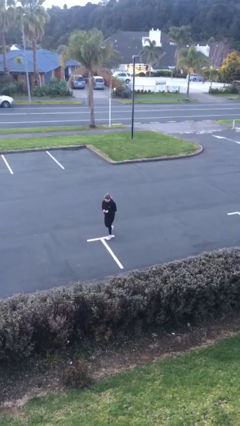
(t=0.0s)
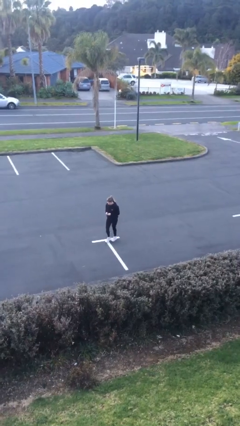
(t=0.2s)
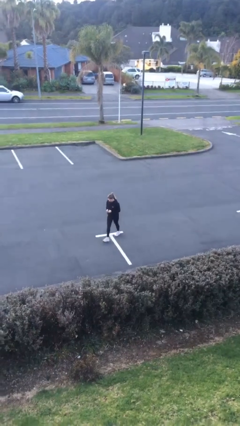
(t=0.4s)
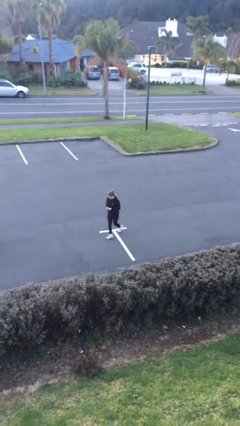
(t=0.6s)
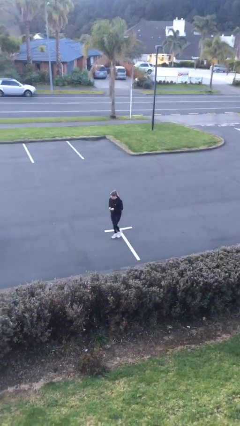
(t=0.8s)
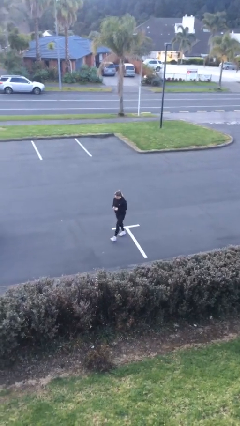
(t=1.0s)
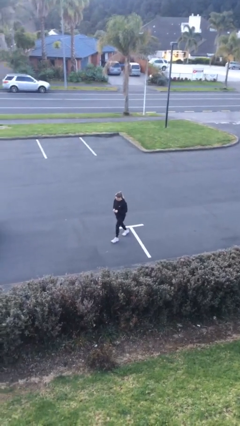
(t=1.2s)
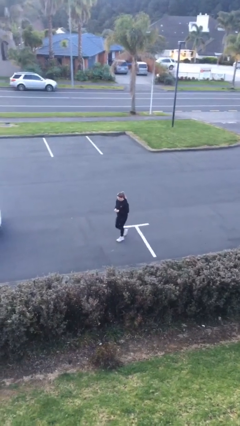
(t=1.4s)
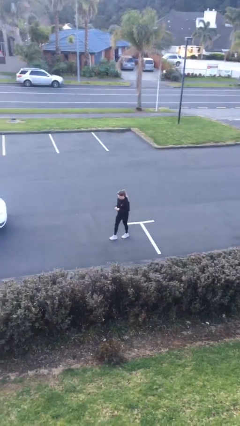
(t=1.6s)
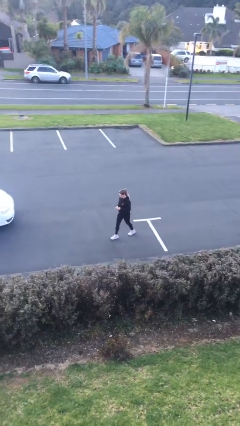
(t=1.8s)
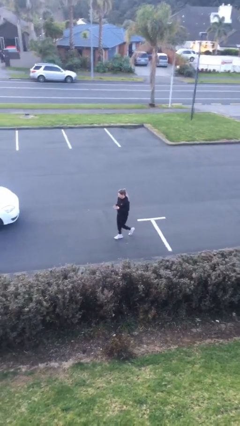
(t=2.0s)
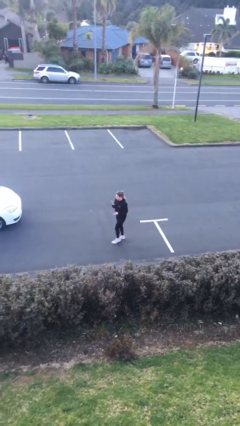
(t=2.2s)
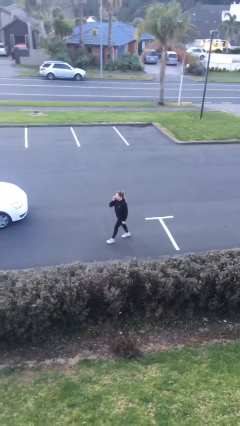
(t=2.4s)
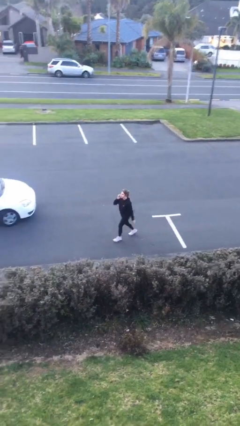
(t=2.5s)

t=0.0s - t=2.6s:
person texts on phone

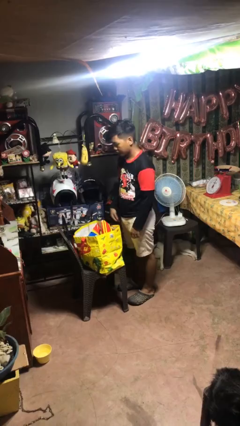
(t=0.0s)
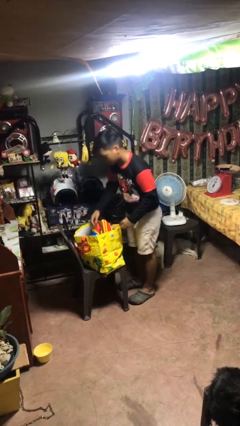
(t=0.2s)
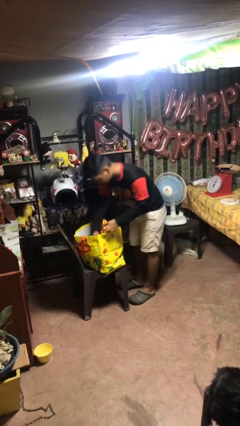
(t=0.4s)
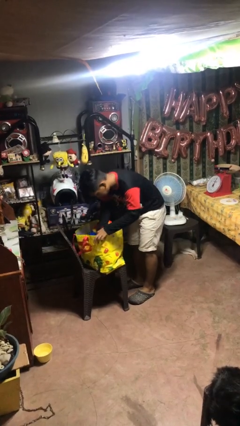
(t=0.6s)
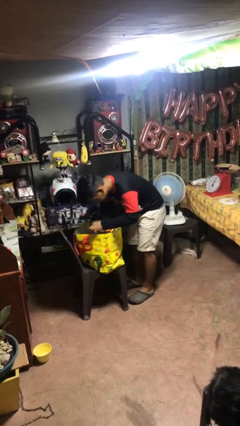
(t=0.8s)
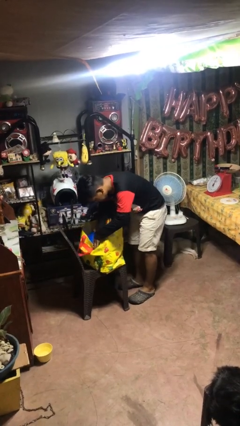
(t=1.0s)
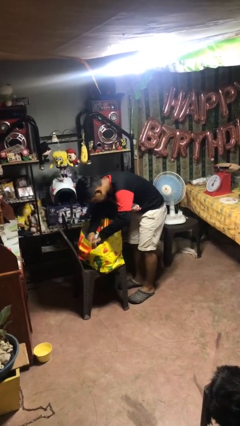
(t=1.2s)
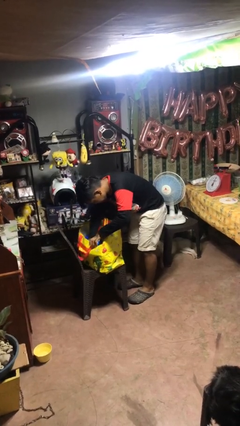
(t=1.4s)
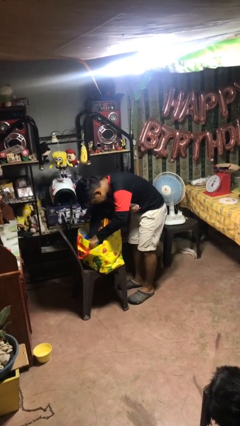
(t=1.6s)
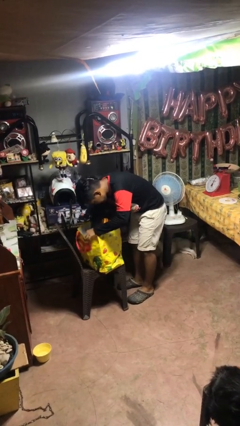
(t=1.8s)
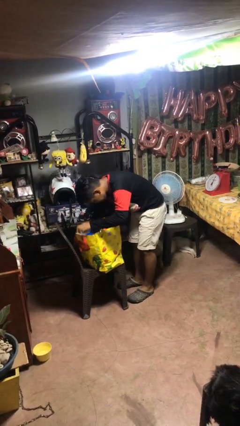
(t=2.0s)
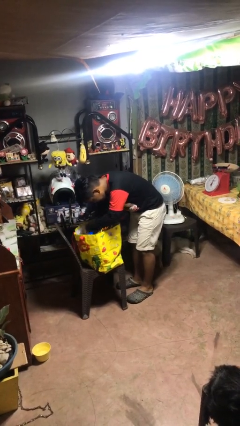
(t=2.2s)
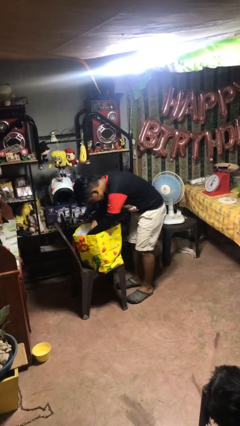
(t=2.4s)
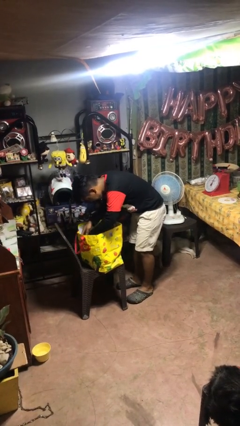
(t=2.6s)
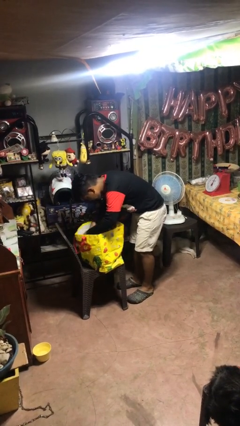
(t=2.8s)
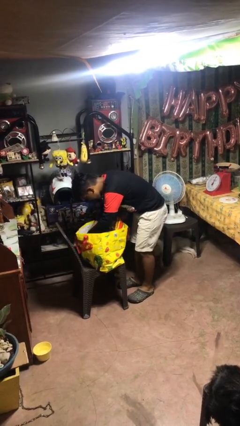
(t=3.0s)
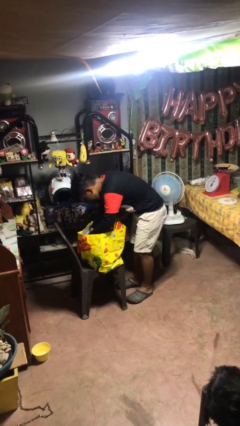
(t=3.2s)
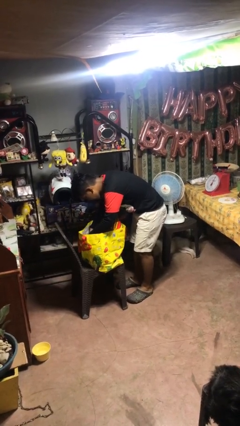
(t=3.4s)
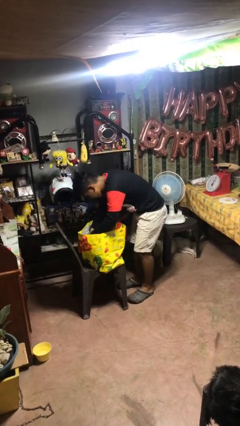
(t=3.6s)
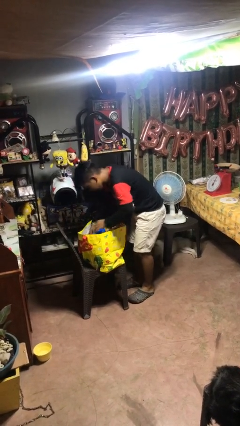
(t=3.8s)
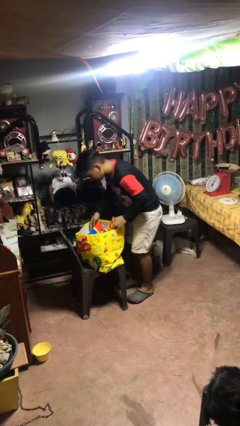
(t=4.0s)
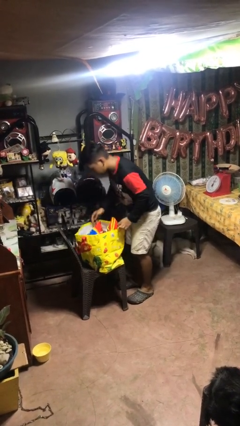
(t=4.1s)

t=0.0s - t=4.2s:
person searches in bag

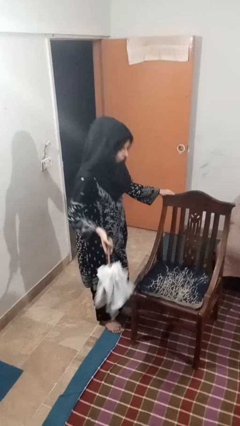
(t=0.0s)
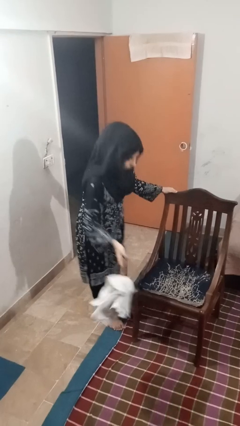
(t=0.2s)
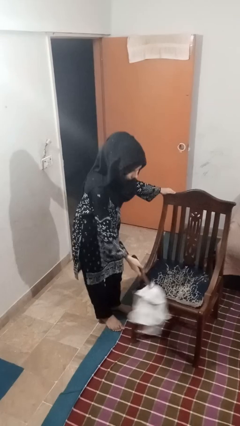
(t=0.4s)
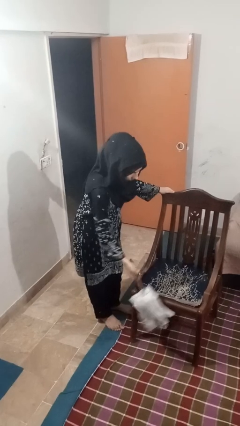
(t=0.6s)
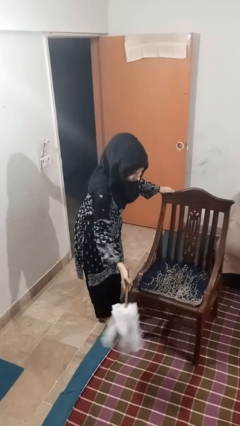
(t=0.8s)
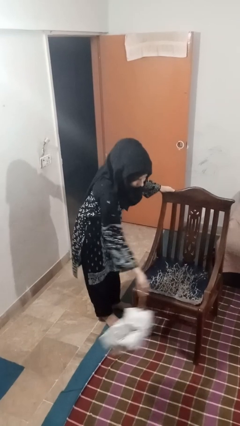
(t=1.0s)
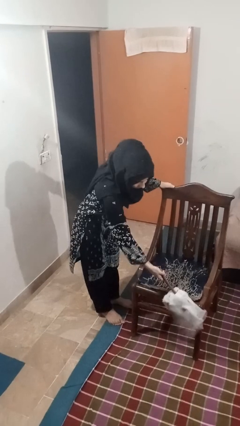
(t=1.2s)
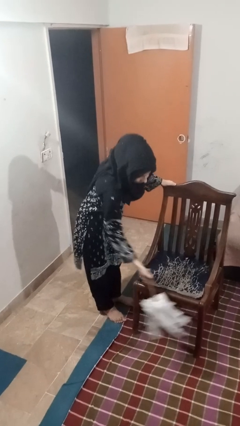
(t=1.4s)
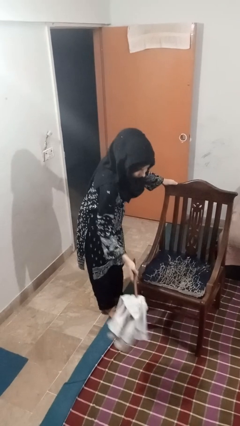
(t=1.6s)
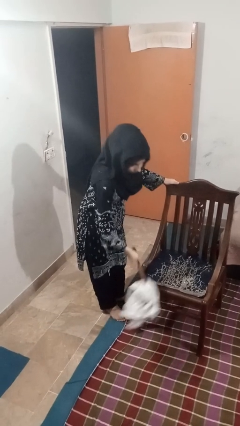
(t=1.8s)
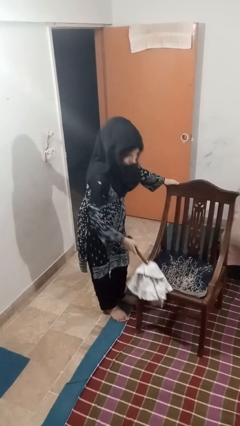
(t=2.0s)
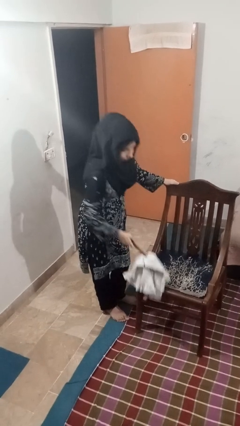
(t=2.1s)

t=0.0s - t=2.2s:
person dusts furniture

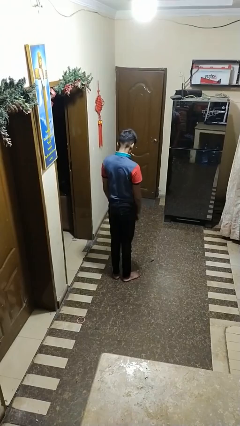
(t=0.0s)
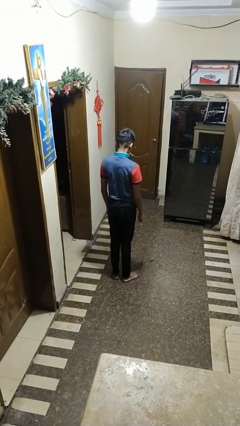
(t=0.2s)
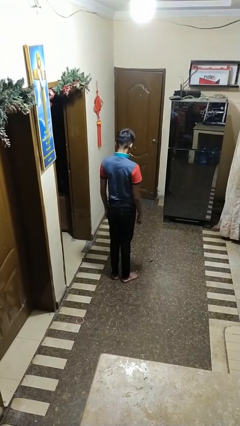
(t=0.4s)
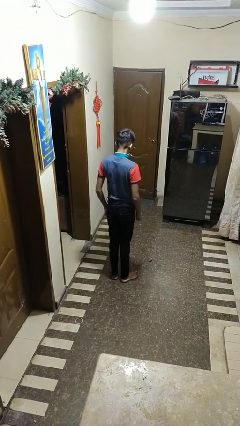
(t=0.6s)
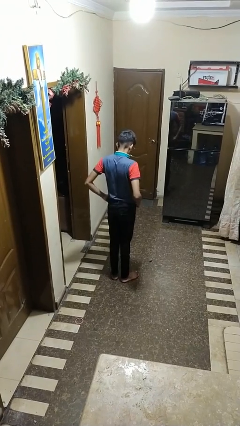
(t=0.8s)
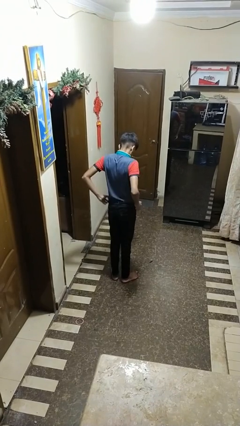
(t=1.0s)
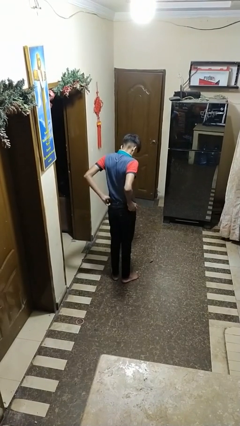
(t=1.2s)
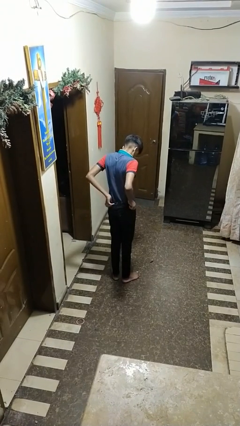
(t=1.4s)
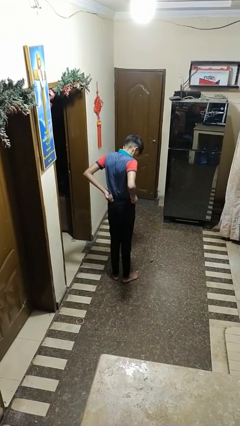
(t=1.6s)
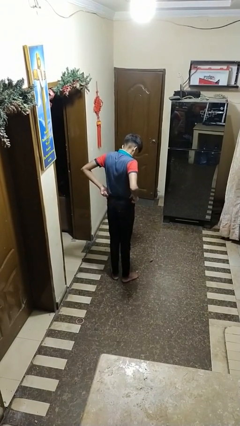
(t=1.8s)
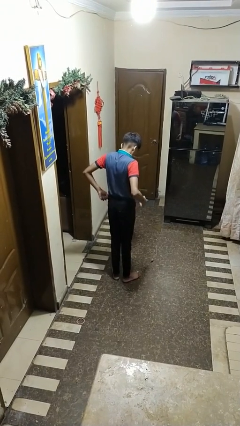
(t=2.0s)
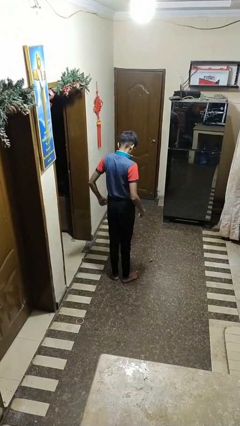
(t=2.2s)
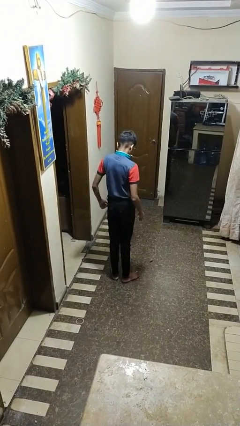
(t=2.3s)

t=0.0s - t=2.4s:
person hikes up pants

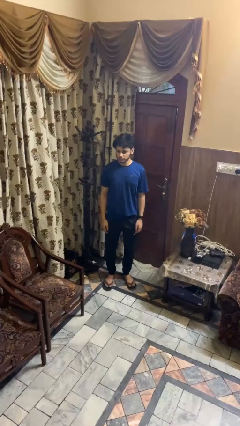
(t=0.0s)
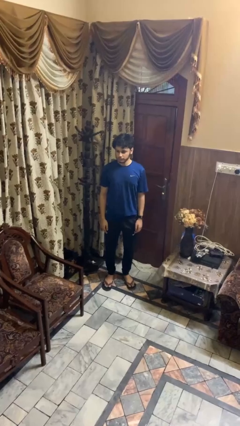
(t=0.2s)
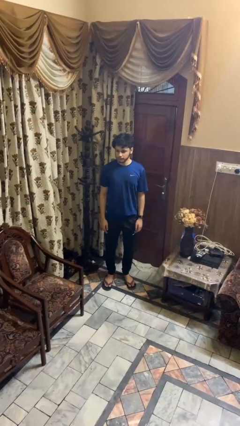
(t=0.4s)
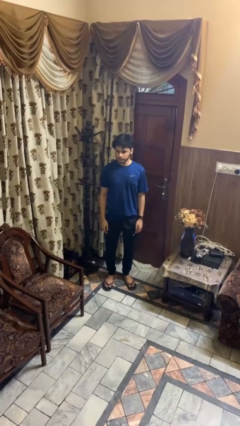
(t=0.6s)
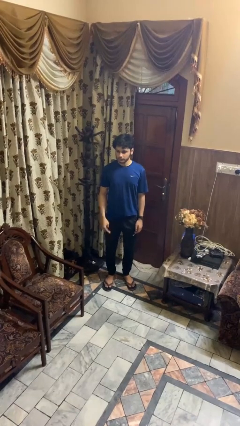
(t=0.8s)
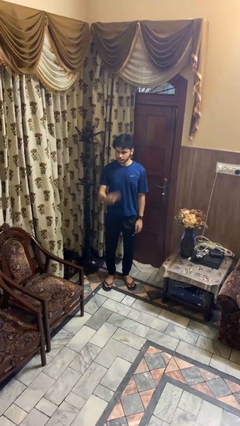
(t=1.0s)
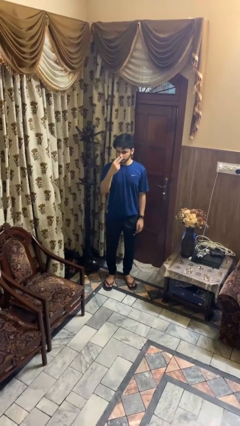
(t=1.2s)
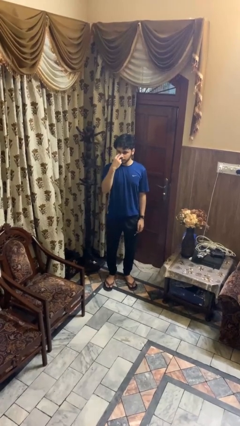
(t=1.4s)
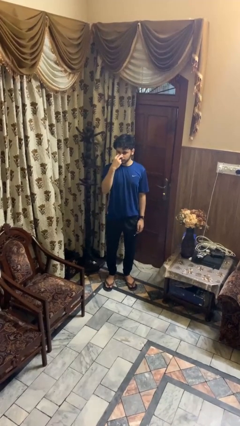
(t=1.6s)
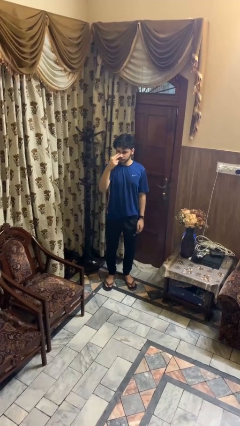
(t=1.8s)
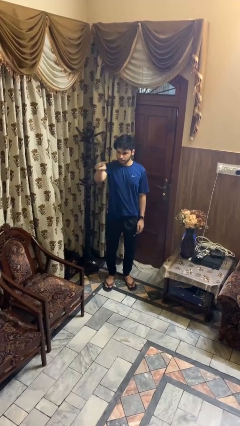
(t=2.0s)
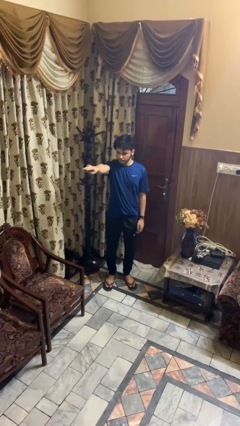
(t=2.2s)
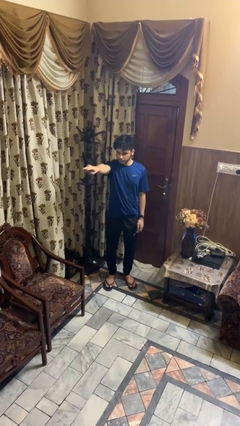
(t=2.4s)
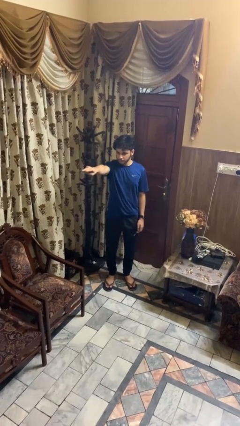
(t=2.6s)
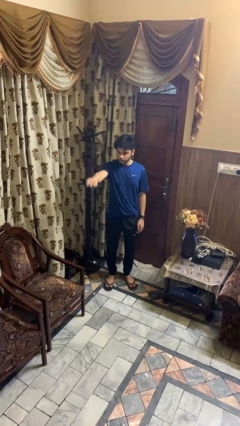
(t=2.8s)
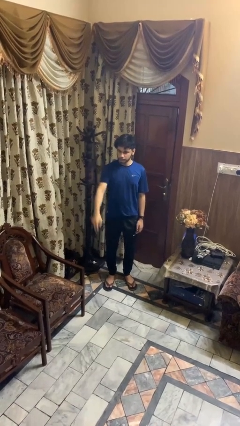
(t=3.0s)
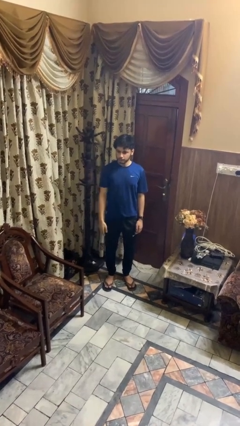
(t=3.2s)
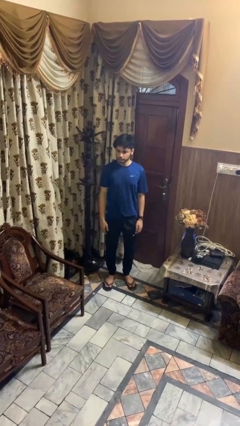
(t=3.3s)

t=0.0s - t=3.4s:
person gestures watch closely

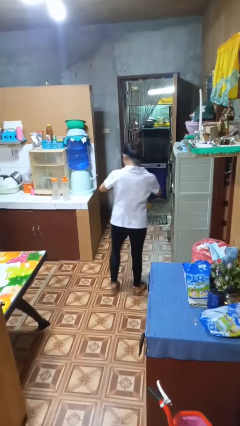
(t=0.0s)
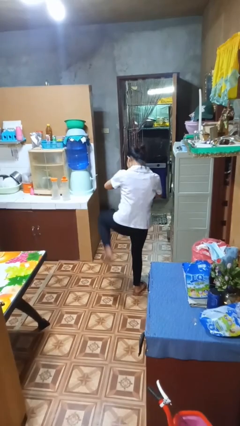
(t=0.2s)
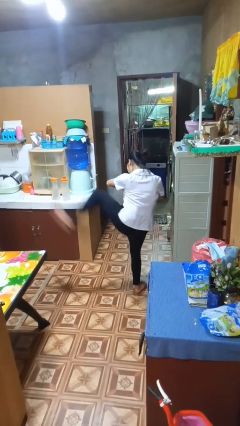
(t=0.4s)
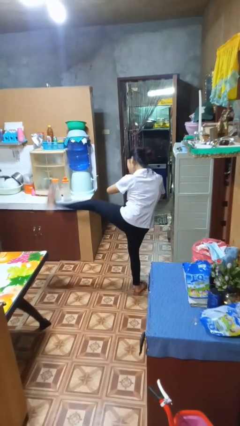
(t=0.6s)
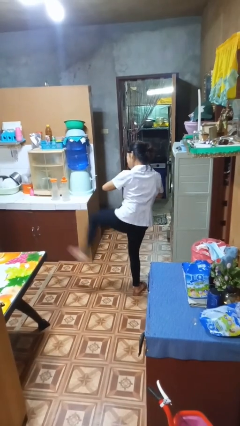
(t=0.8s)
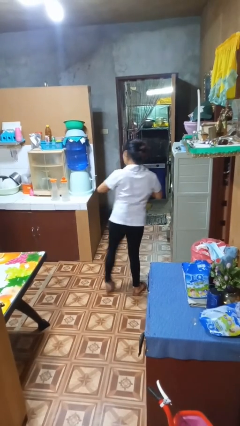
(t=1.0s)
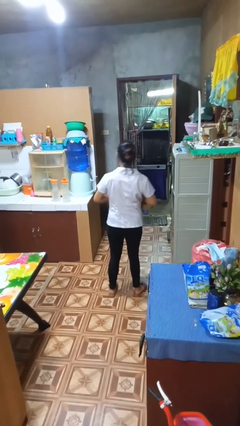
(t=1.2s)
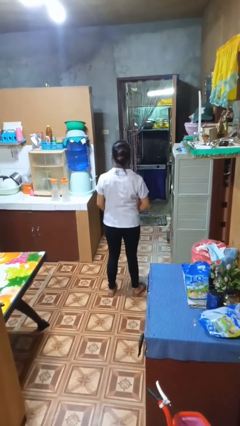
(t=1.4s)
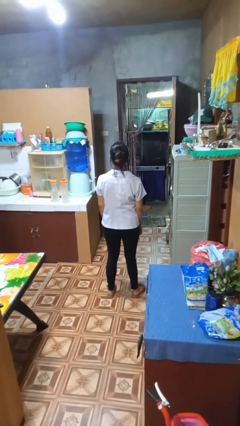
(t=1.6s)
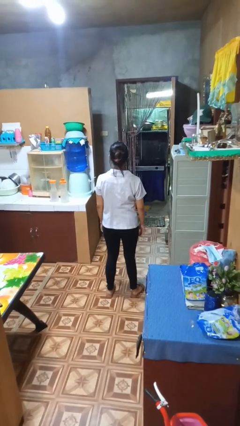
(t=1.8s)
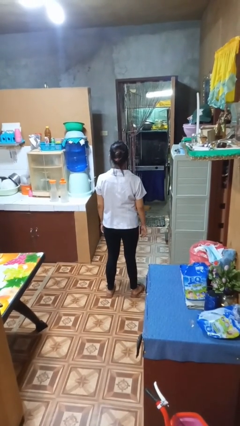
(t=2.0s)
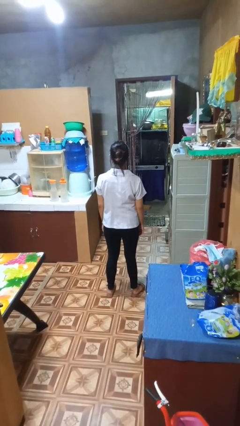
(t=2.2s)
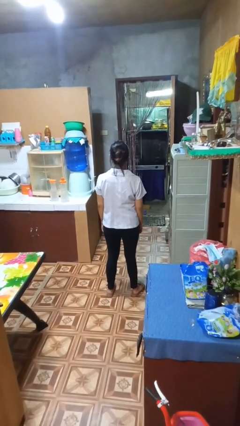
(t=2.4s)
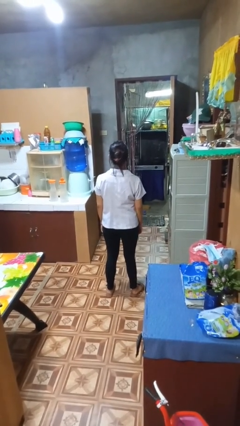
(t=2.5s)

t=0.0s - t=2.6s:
person karate kicks
